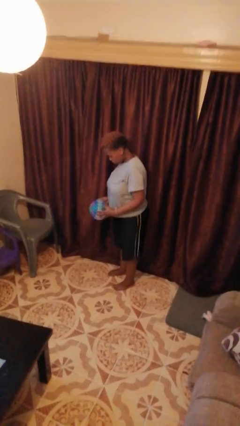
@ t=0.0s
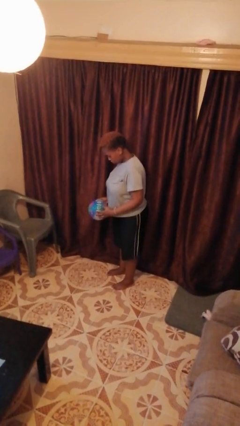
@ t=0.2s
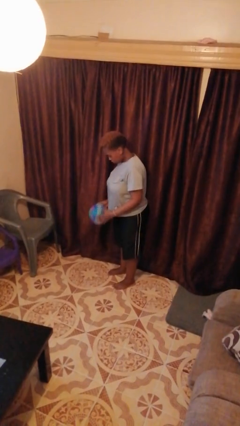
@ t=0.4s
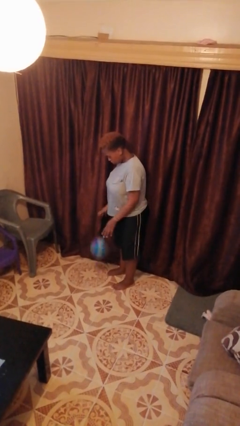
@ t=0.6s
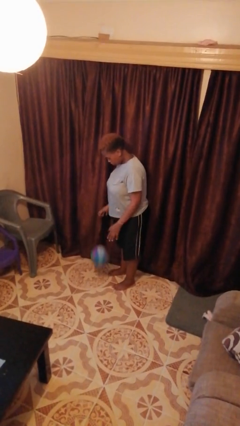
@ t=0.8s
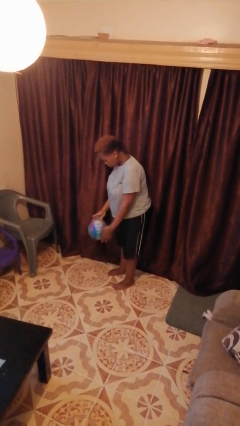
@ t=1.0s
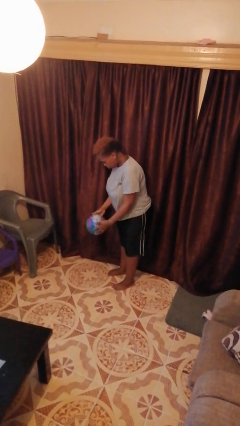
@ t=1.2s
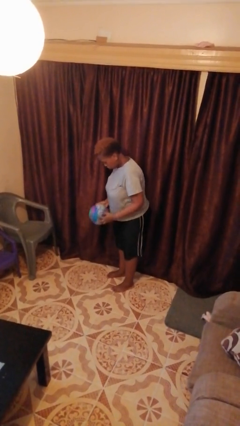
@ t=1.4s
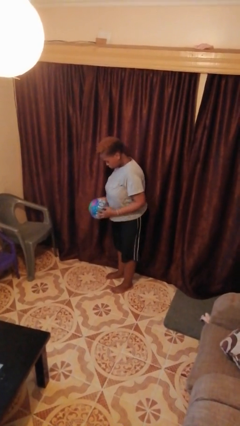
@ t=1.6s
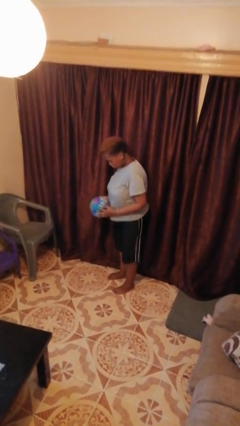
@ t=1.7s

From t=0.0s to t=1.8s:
person bounces ball on floor

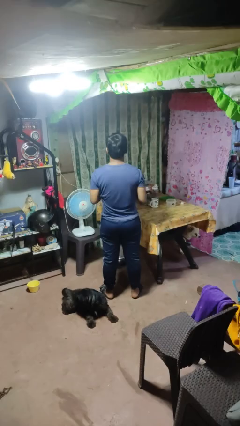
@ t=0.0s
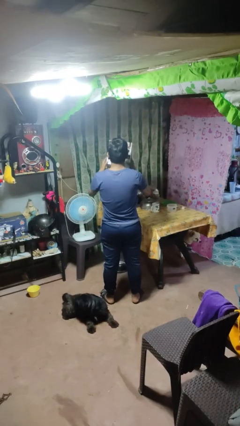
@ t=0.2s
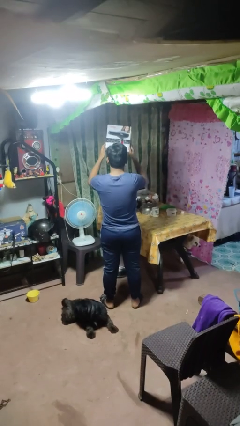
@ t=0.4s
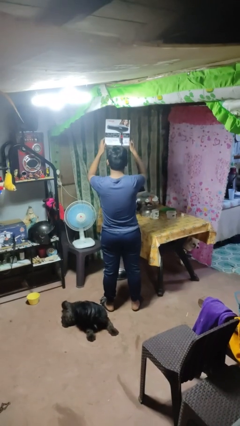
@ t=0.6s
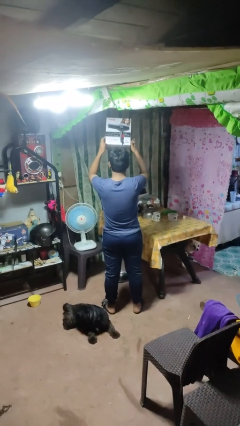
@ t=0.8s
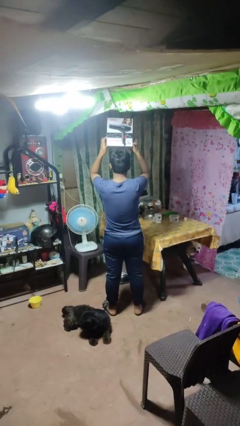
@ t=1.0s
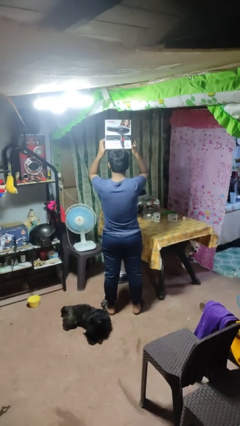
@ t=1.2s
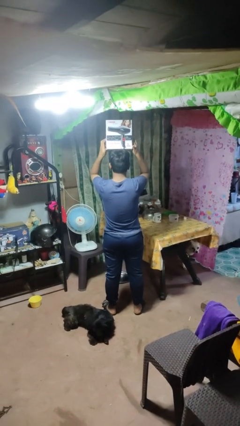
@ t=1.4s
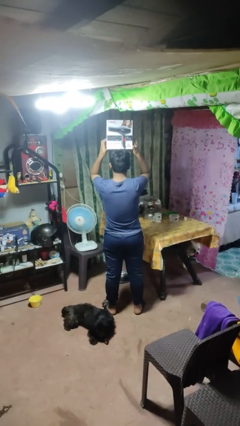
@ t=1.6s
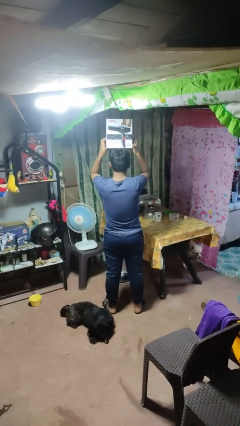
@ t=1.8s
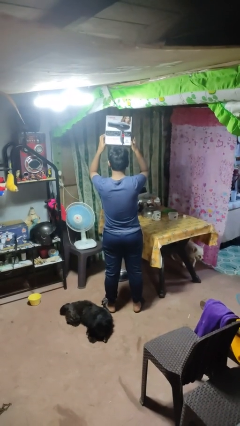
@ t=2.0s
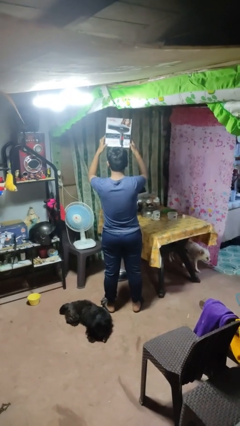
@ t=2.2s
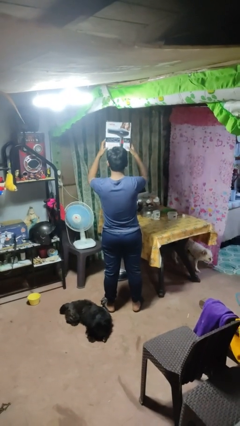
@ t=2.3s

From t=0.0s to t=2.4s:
person holds object above head

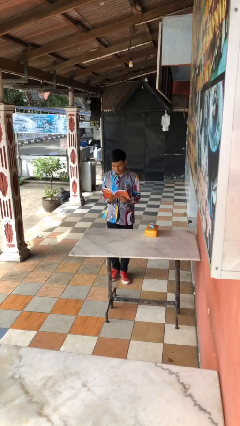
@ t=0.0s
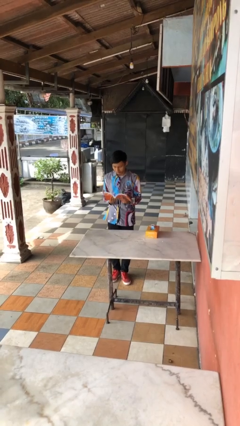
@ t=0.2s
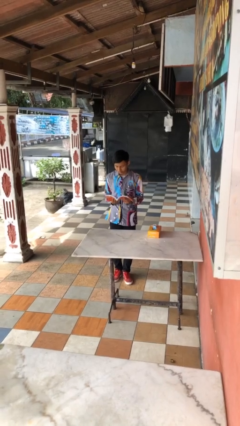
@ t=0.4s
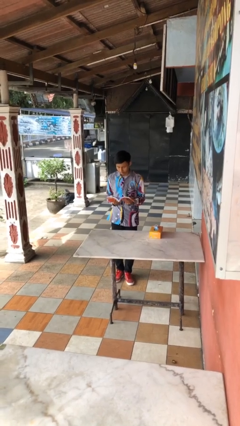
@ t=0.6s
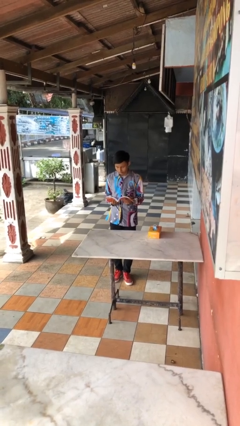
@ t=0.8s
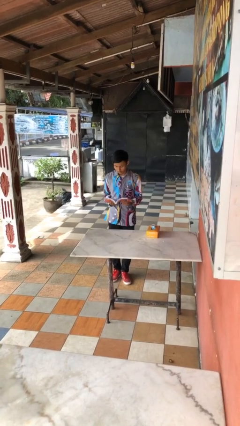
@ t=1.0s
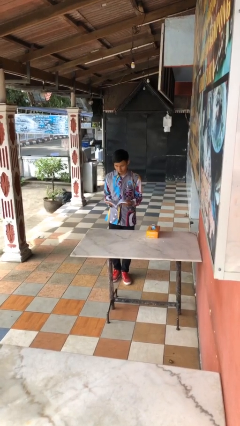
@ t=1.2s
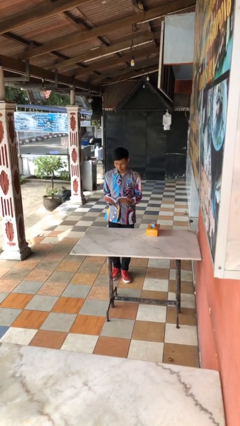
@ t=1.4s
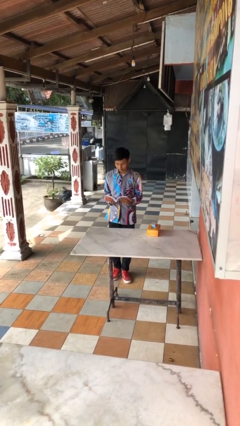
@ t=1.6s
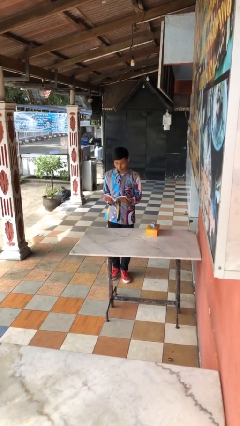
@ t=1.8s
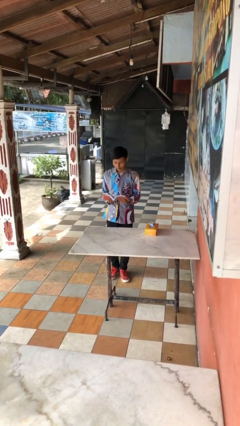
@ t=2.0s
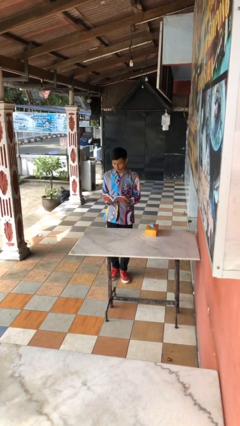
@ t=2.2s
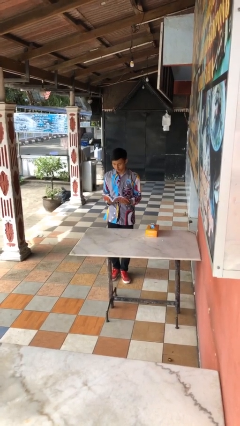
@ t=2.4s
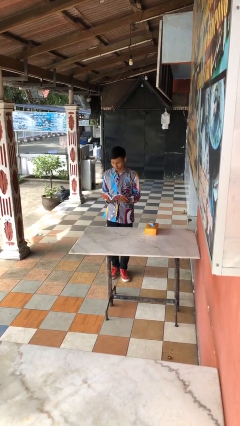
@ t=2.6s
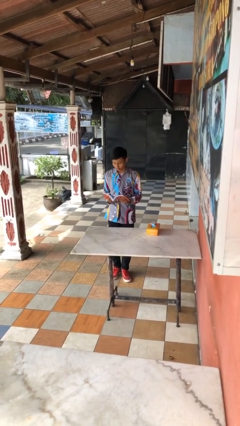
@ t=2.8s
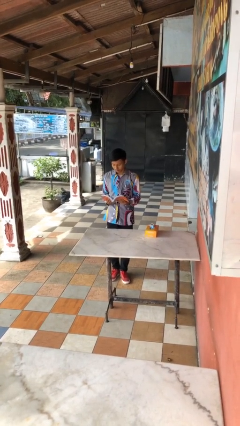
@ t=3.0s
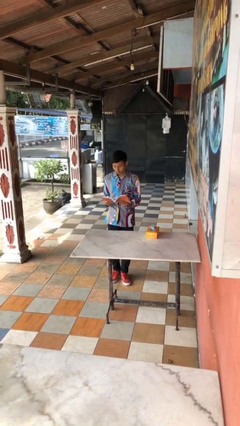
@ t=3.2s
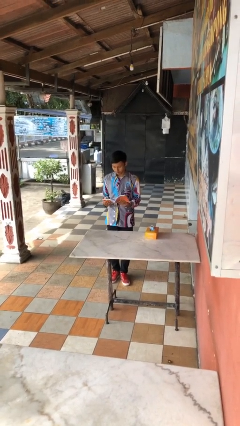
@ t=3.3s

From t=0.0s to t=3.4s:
person reads document

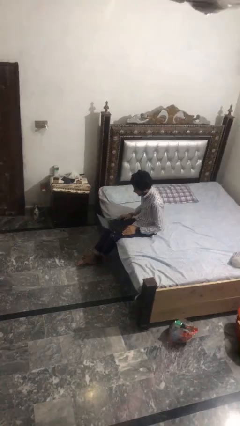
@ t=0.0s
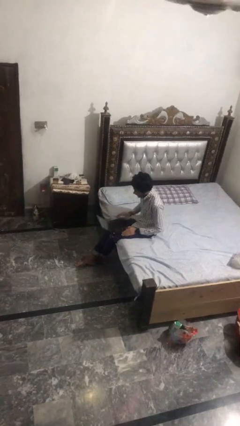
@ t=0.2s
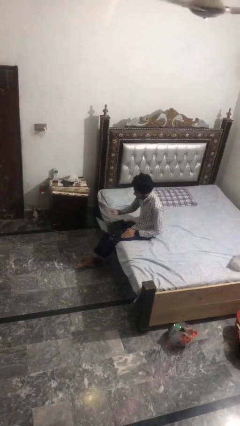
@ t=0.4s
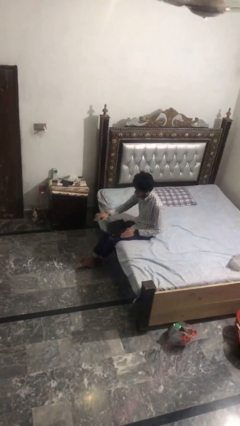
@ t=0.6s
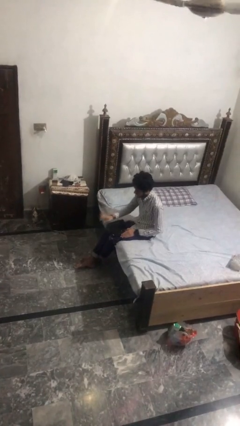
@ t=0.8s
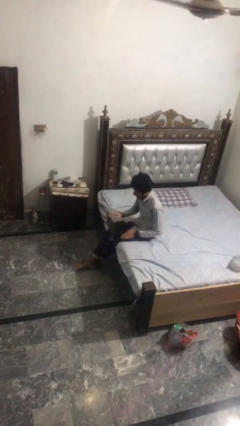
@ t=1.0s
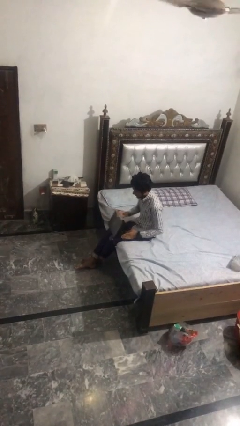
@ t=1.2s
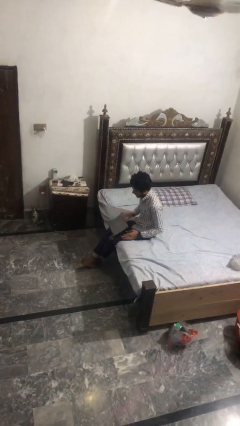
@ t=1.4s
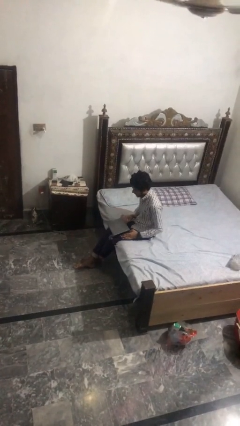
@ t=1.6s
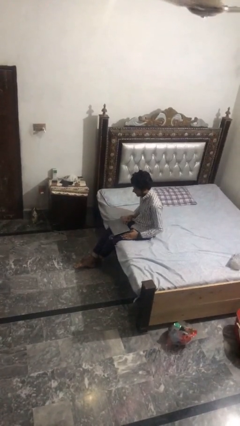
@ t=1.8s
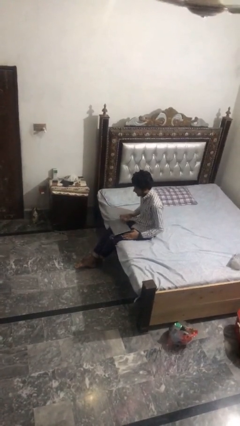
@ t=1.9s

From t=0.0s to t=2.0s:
person closes laptop

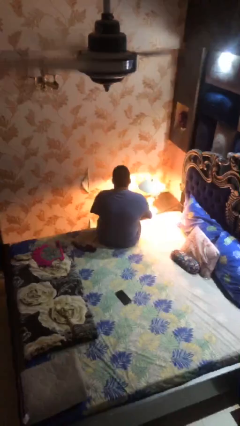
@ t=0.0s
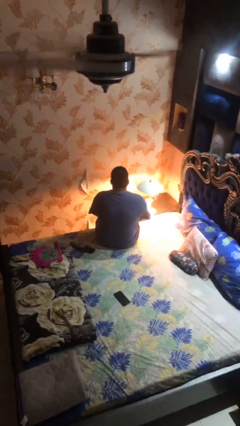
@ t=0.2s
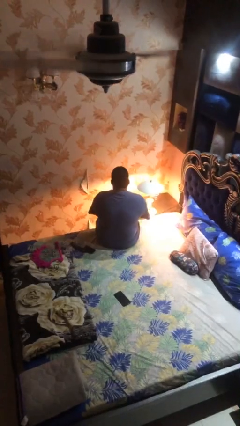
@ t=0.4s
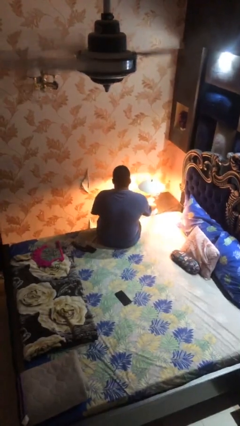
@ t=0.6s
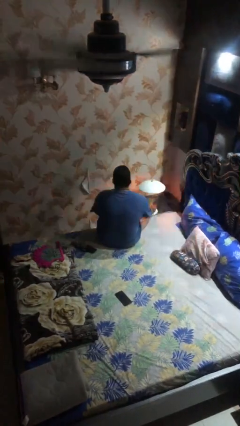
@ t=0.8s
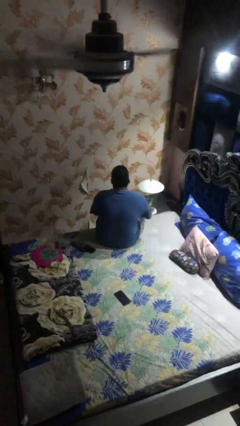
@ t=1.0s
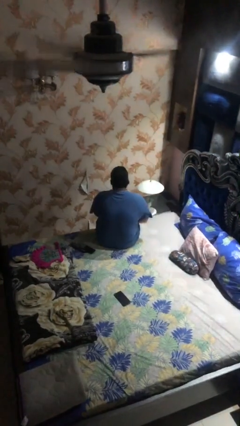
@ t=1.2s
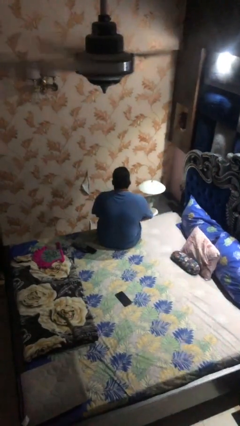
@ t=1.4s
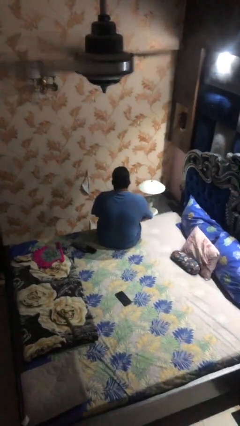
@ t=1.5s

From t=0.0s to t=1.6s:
person turns off lamp

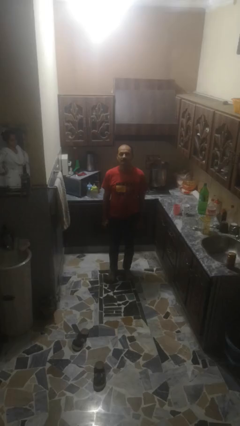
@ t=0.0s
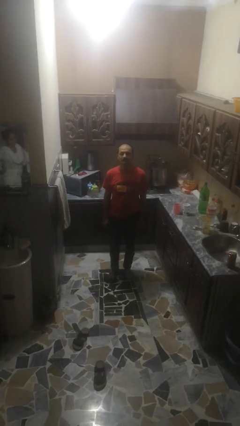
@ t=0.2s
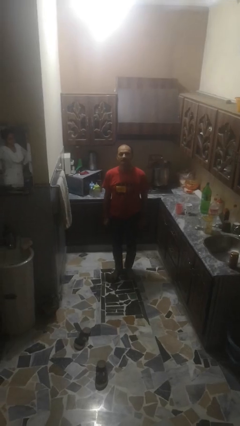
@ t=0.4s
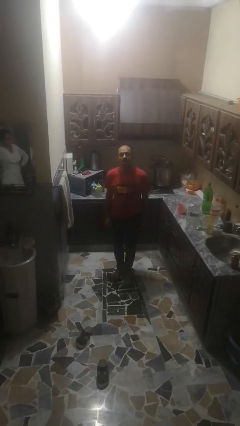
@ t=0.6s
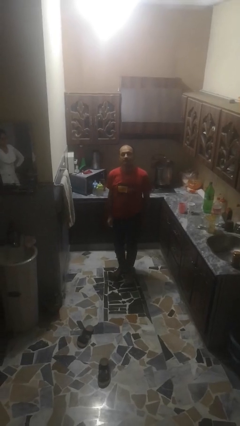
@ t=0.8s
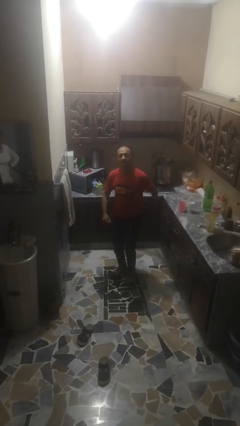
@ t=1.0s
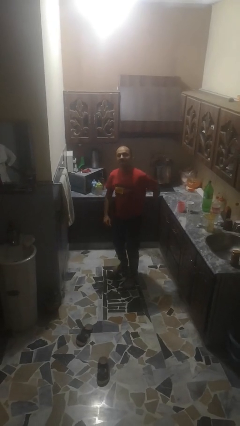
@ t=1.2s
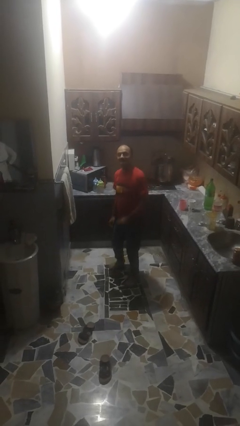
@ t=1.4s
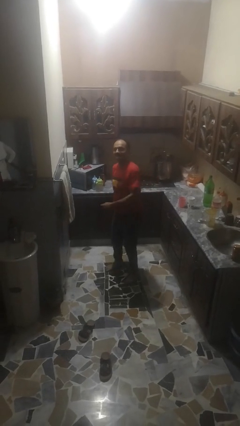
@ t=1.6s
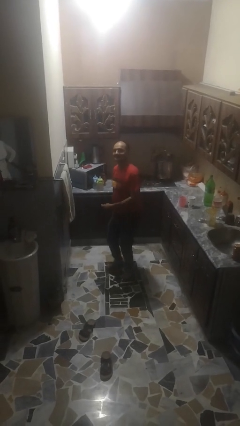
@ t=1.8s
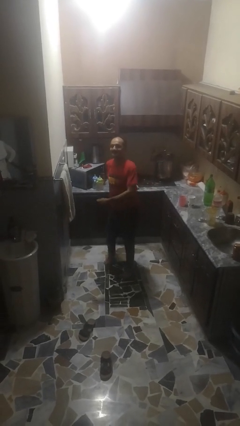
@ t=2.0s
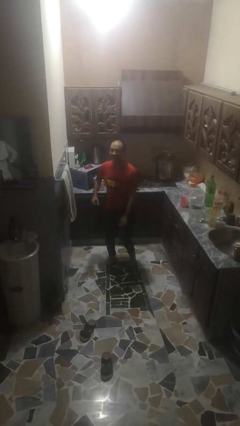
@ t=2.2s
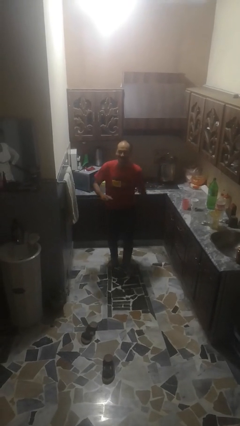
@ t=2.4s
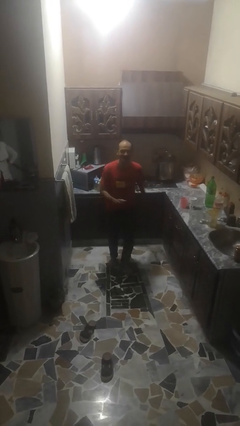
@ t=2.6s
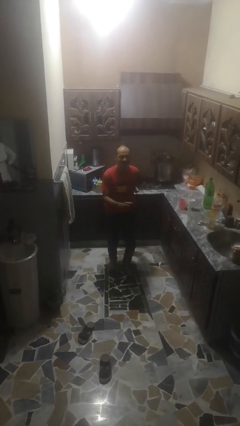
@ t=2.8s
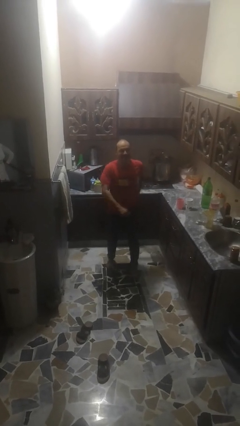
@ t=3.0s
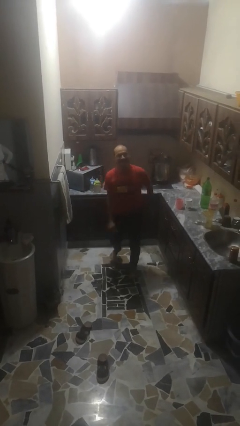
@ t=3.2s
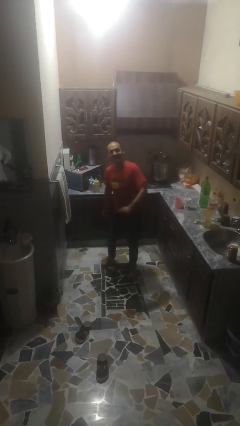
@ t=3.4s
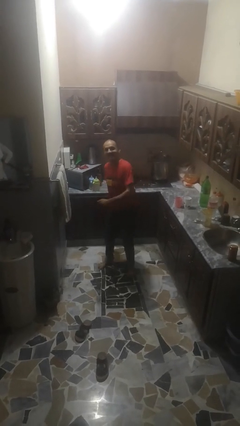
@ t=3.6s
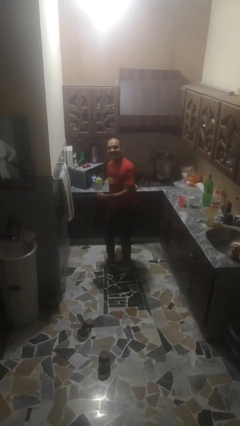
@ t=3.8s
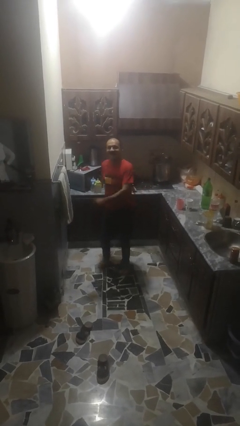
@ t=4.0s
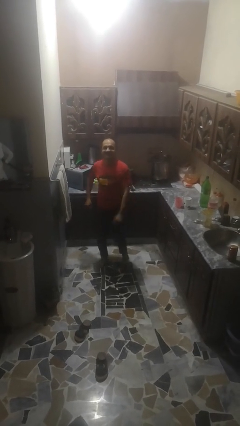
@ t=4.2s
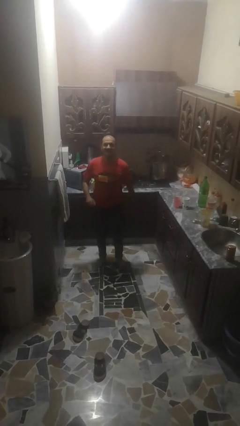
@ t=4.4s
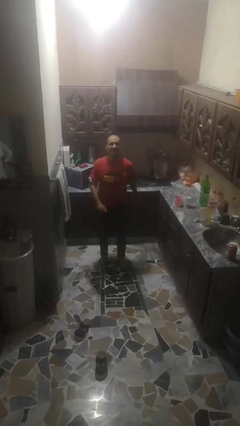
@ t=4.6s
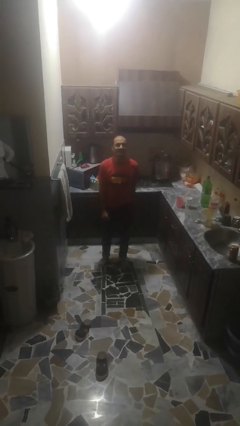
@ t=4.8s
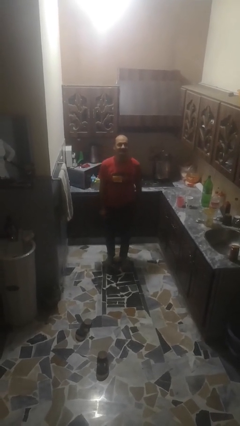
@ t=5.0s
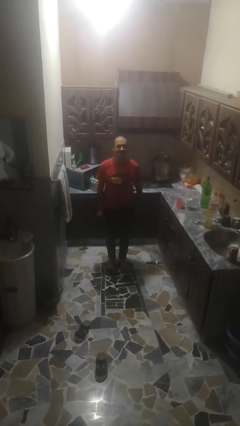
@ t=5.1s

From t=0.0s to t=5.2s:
person dances in place

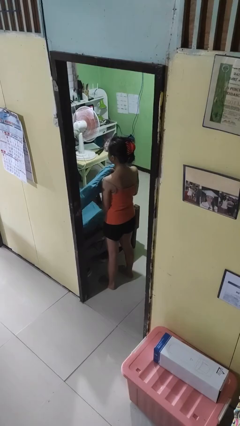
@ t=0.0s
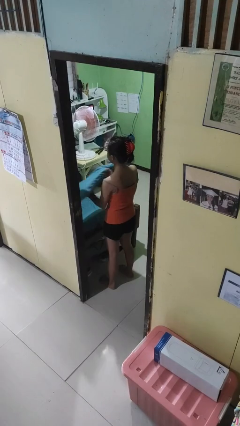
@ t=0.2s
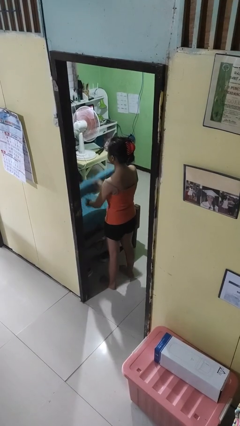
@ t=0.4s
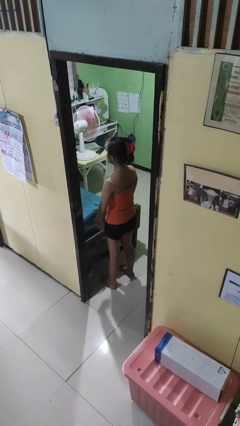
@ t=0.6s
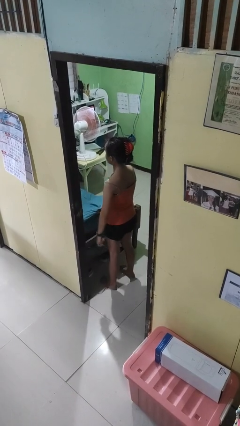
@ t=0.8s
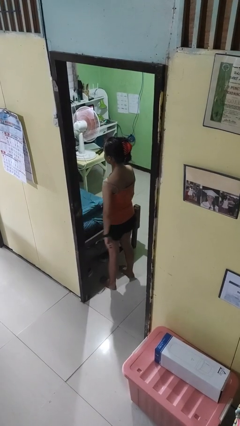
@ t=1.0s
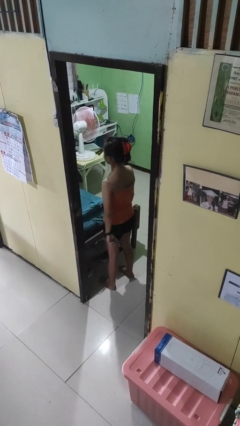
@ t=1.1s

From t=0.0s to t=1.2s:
person puts down object on bed
